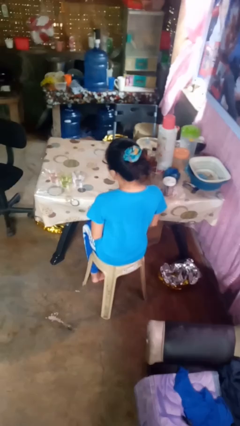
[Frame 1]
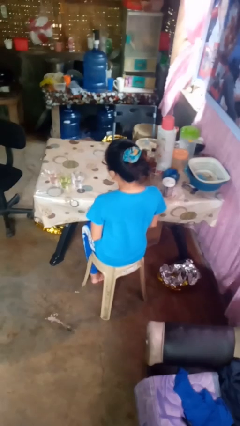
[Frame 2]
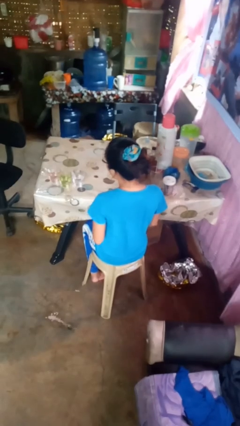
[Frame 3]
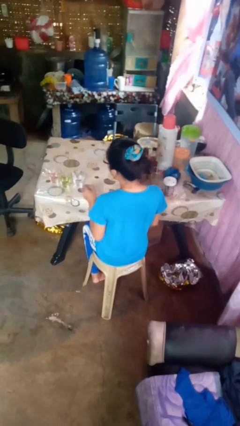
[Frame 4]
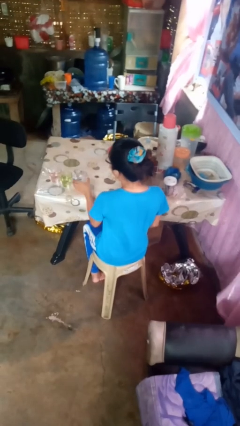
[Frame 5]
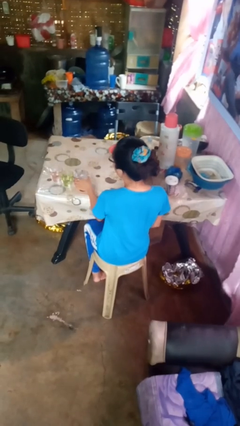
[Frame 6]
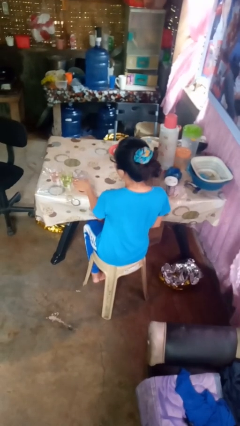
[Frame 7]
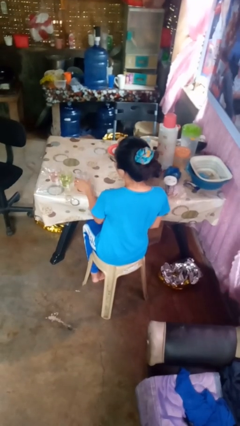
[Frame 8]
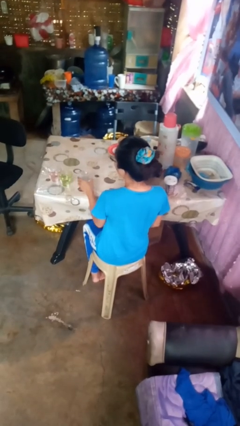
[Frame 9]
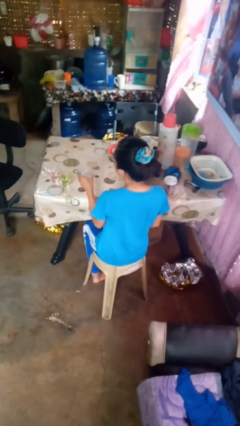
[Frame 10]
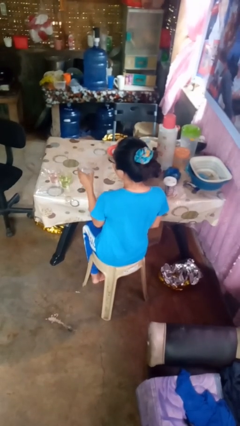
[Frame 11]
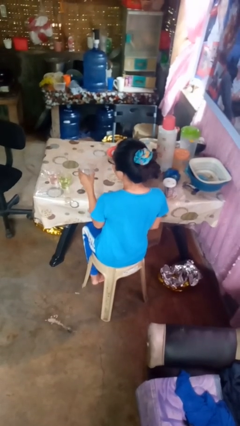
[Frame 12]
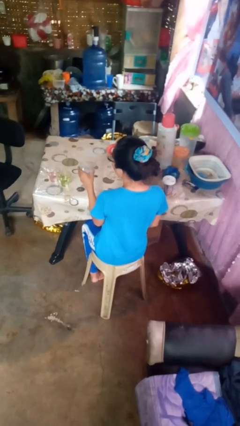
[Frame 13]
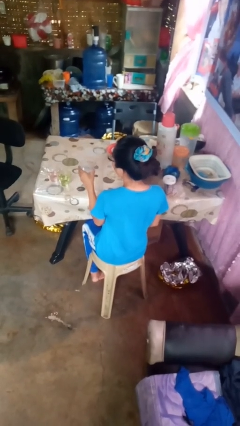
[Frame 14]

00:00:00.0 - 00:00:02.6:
person picks up object from table

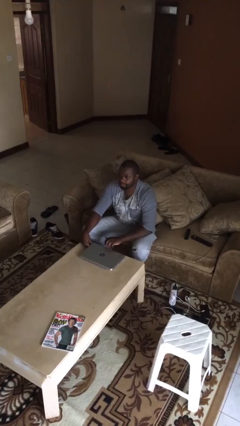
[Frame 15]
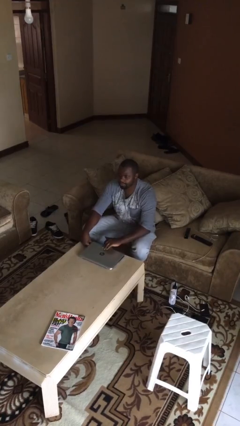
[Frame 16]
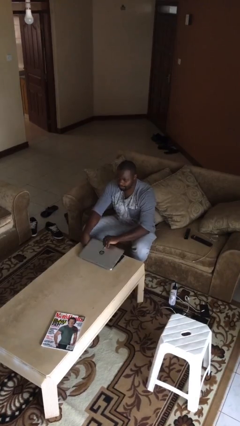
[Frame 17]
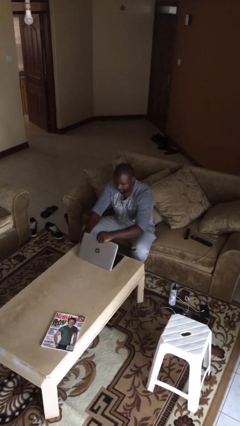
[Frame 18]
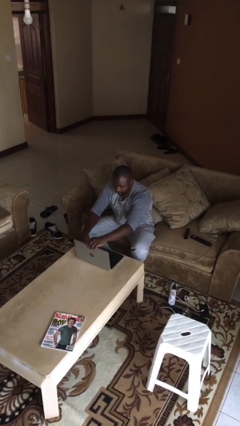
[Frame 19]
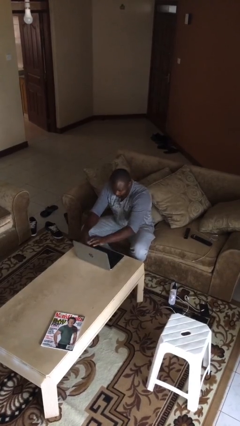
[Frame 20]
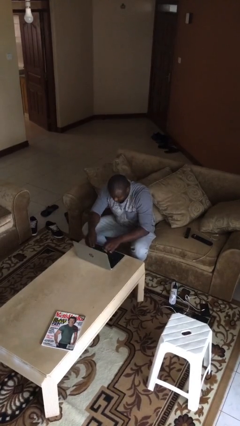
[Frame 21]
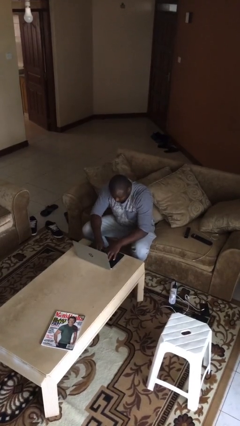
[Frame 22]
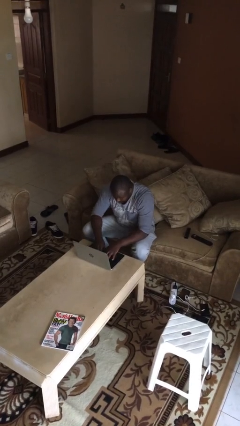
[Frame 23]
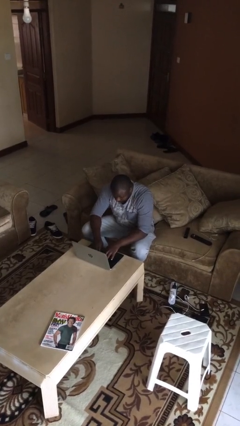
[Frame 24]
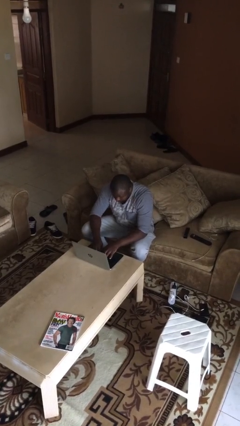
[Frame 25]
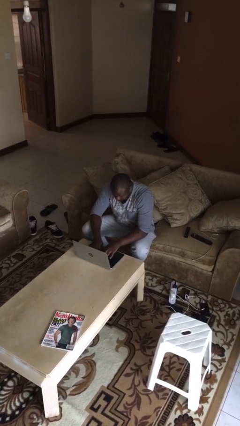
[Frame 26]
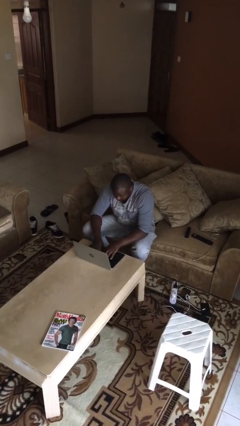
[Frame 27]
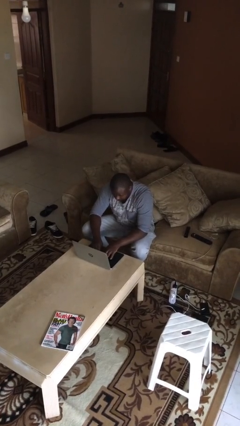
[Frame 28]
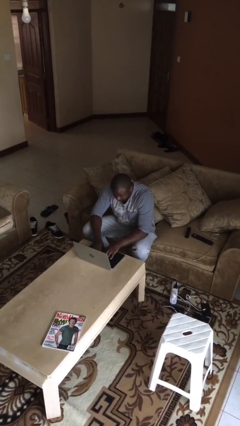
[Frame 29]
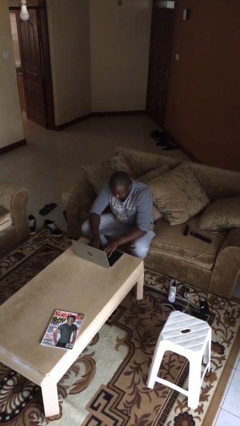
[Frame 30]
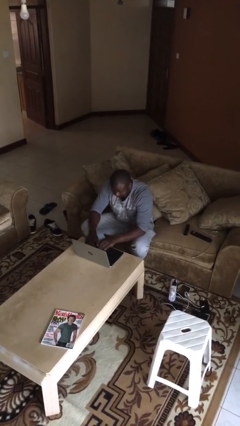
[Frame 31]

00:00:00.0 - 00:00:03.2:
person interacts with laptop

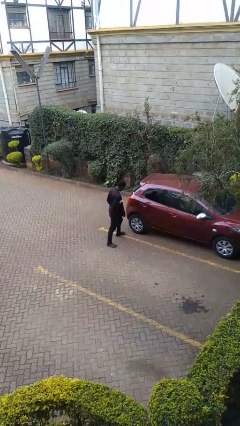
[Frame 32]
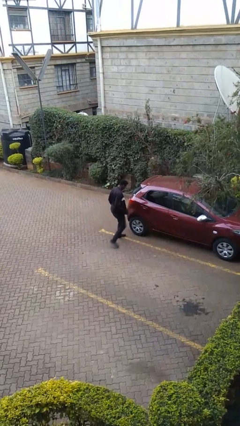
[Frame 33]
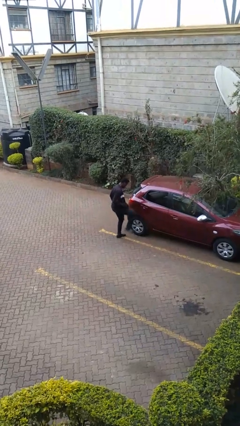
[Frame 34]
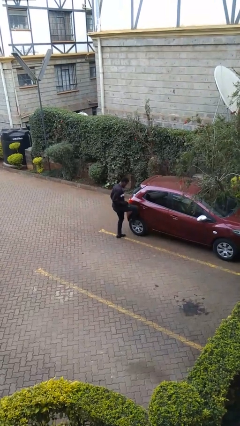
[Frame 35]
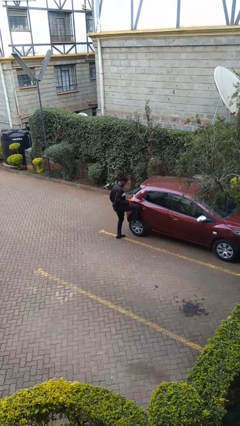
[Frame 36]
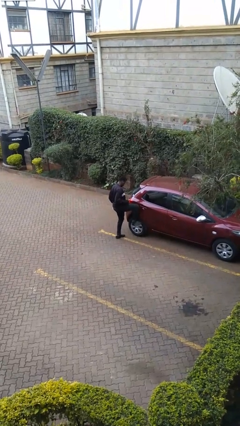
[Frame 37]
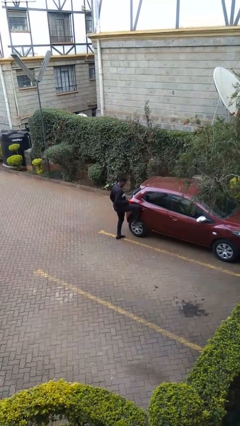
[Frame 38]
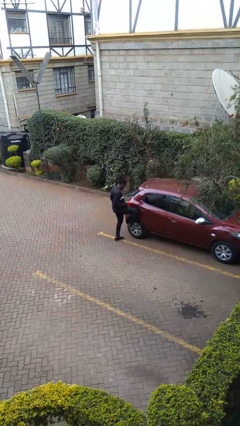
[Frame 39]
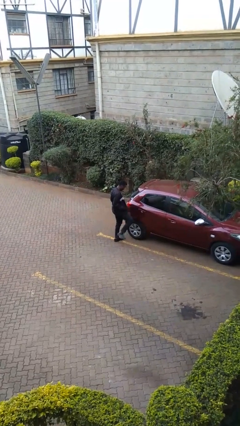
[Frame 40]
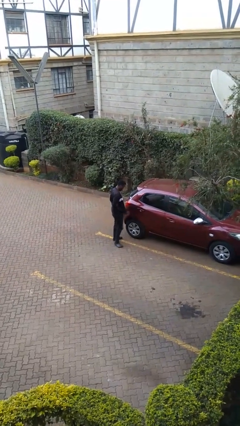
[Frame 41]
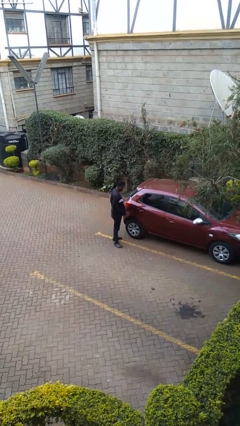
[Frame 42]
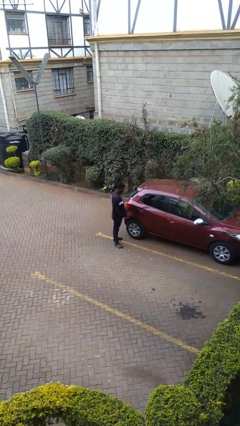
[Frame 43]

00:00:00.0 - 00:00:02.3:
person kicks car tires

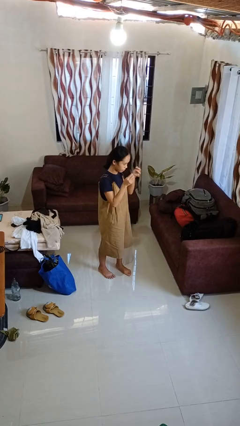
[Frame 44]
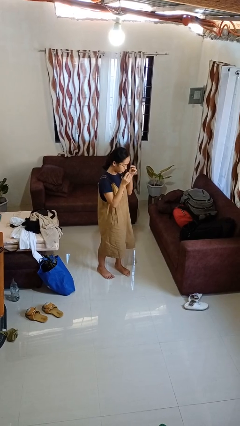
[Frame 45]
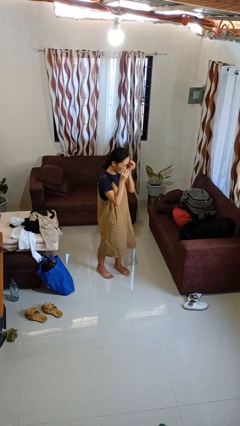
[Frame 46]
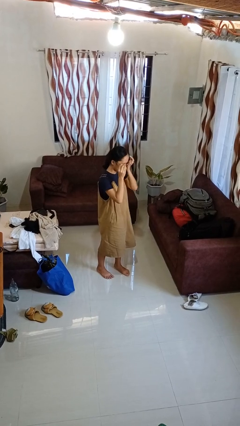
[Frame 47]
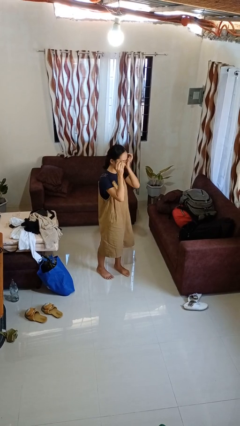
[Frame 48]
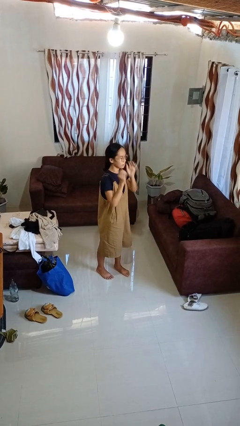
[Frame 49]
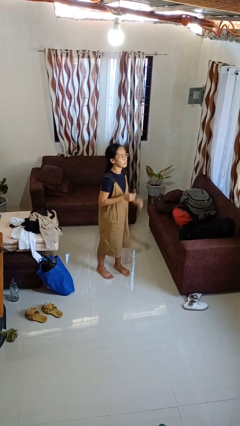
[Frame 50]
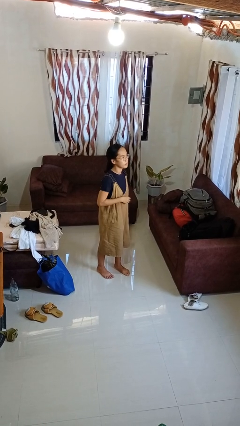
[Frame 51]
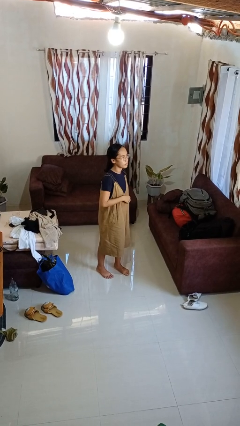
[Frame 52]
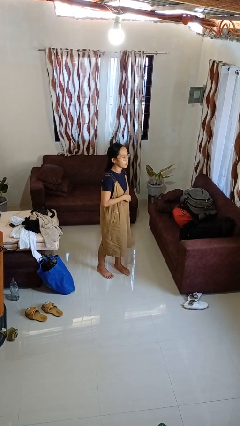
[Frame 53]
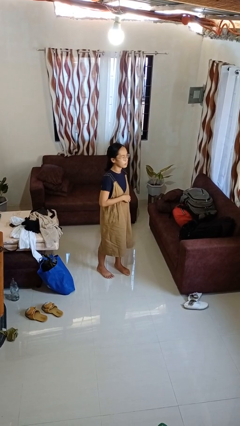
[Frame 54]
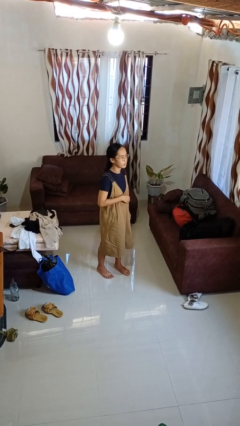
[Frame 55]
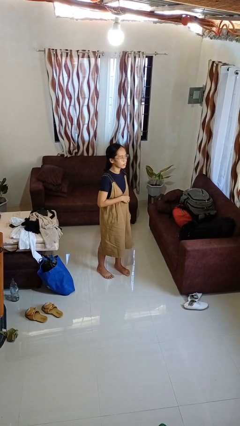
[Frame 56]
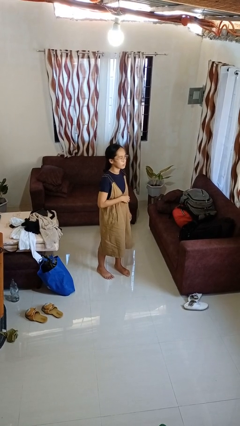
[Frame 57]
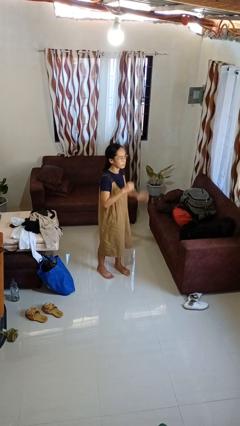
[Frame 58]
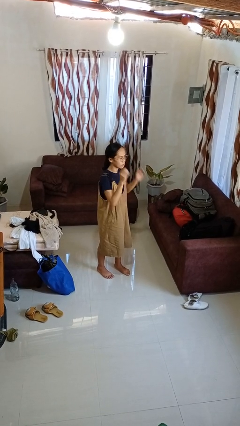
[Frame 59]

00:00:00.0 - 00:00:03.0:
person puts on glasses

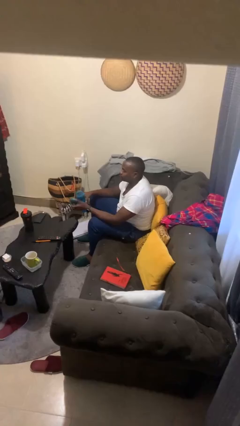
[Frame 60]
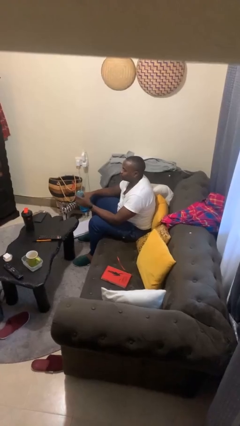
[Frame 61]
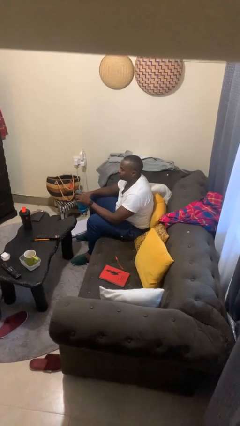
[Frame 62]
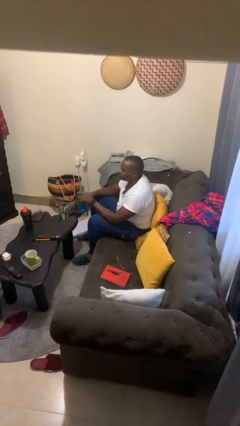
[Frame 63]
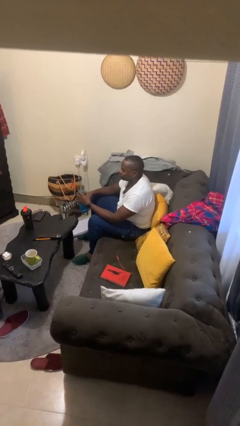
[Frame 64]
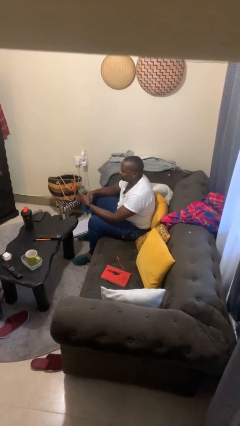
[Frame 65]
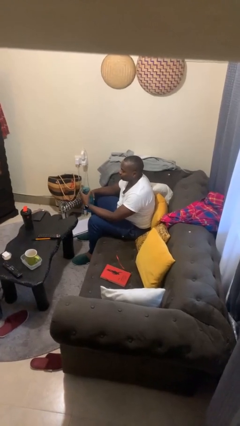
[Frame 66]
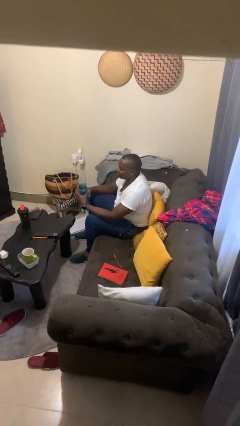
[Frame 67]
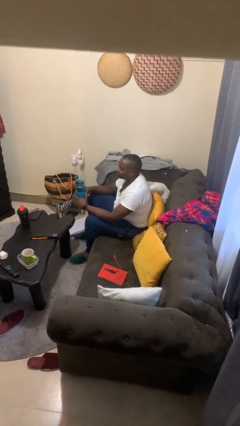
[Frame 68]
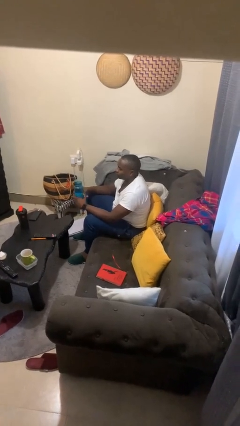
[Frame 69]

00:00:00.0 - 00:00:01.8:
person screws lid to bottle

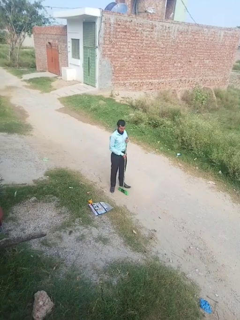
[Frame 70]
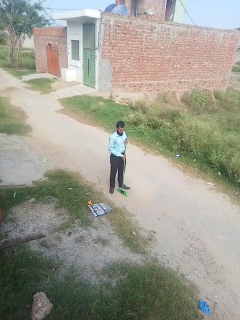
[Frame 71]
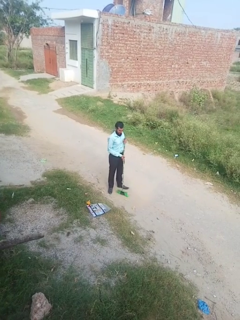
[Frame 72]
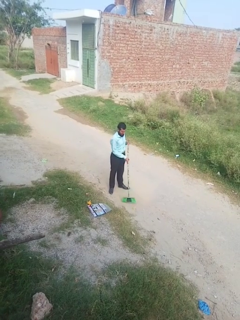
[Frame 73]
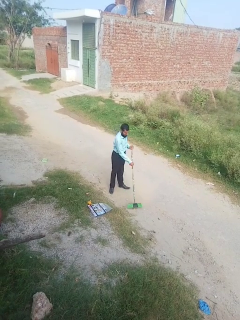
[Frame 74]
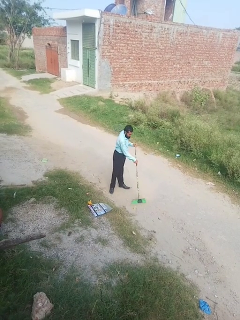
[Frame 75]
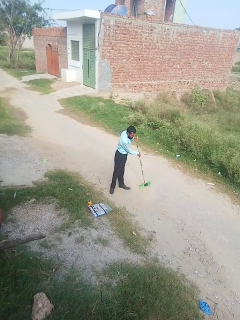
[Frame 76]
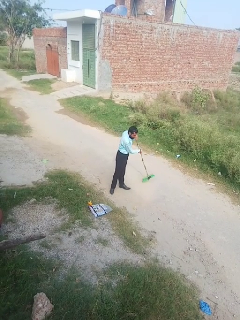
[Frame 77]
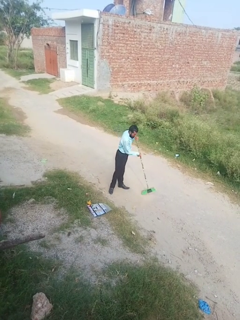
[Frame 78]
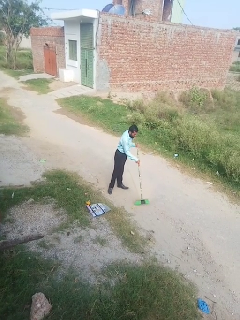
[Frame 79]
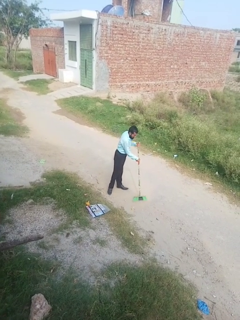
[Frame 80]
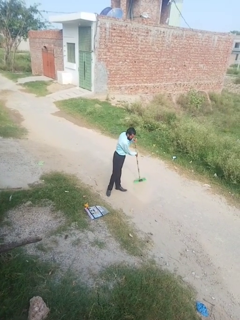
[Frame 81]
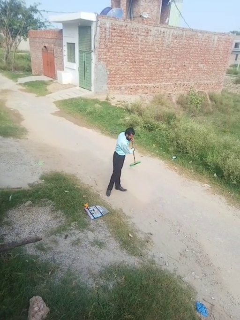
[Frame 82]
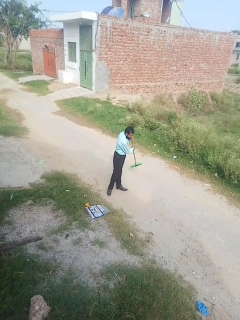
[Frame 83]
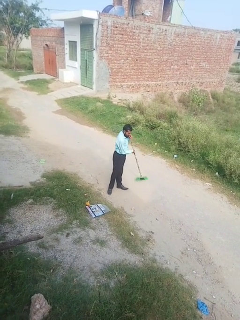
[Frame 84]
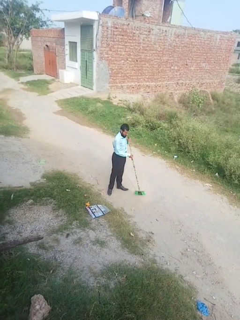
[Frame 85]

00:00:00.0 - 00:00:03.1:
person sweeps floor

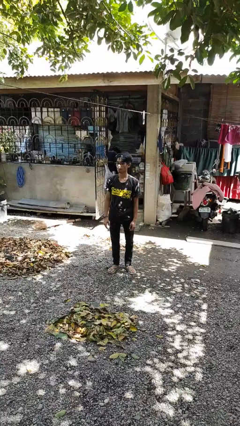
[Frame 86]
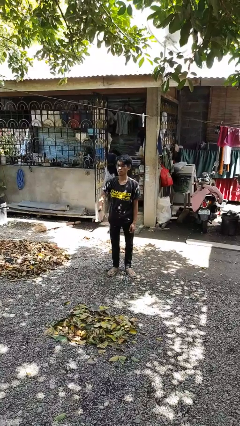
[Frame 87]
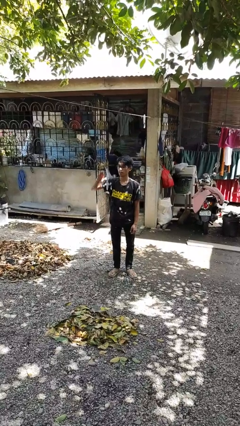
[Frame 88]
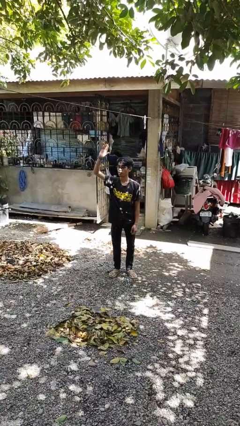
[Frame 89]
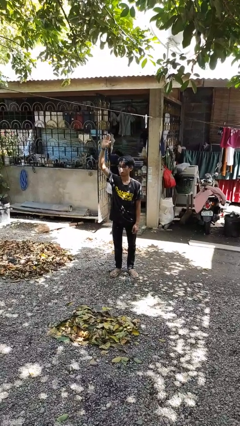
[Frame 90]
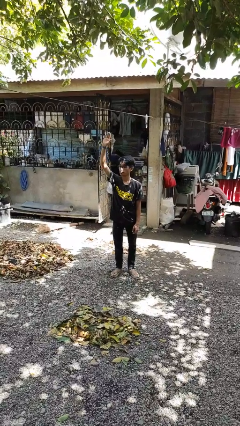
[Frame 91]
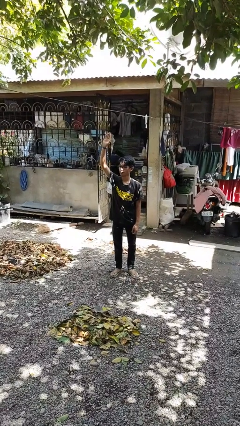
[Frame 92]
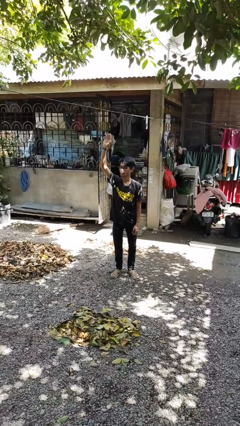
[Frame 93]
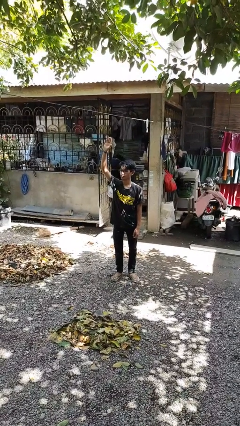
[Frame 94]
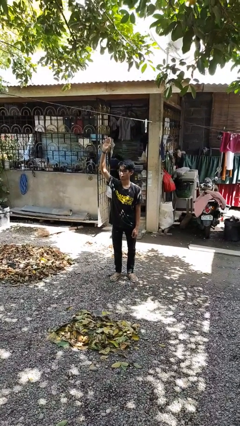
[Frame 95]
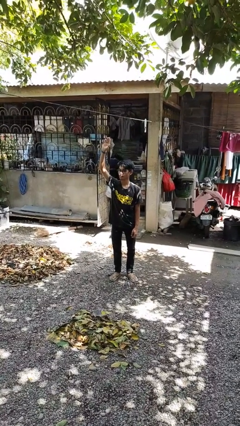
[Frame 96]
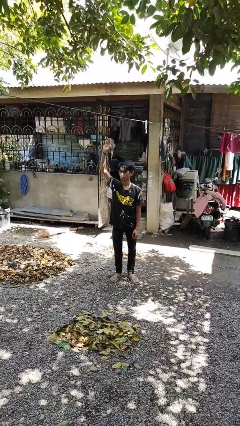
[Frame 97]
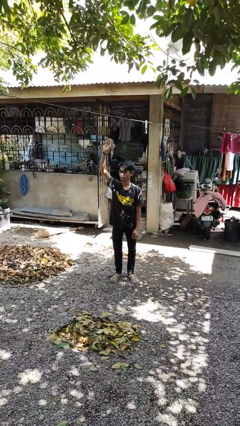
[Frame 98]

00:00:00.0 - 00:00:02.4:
person gestures raise hand
